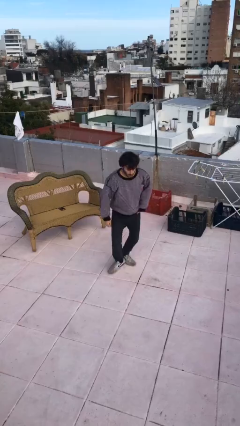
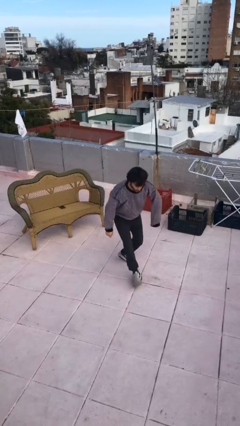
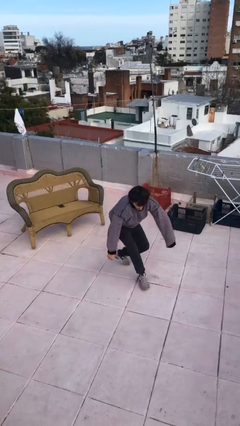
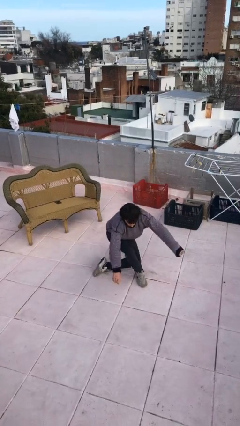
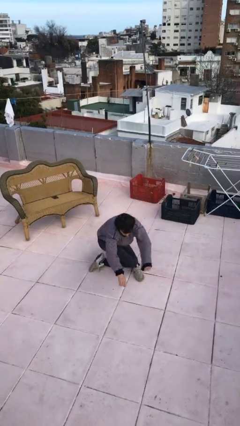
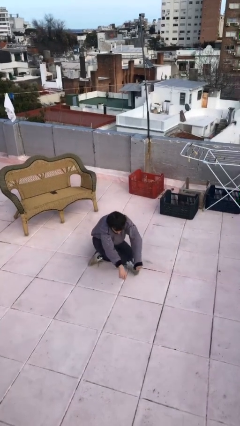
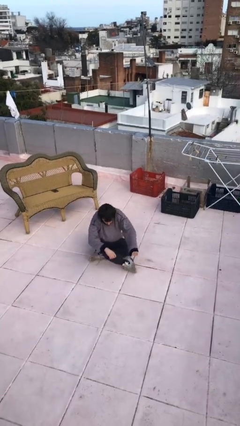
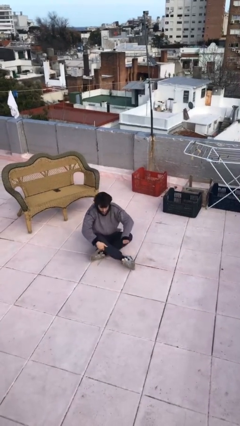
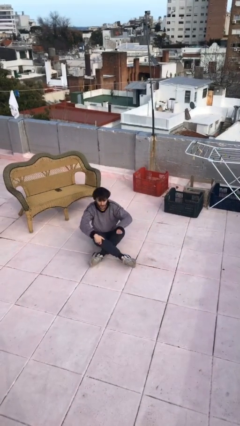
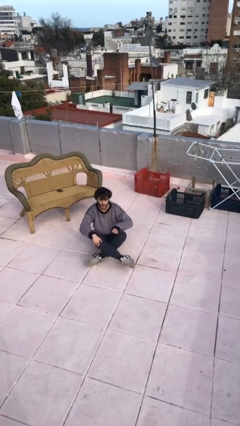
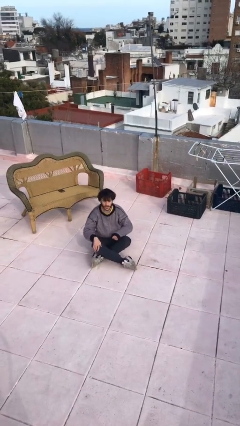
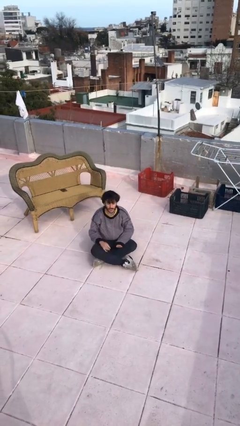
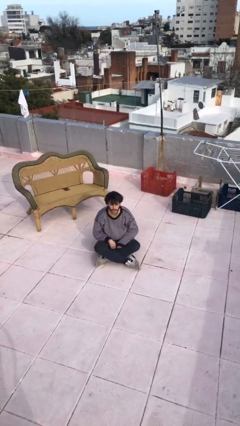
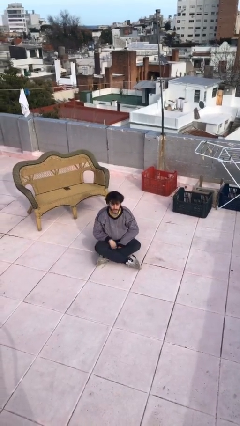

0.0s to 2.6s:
person sits crisscross

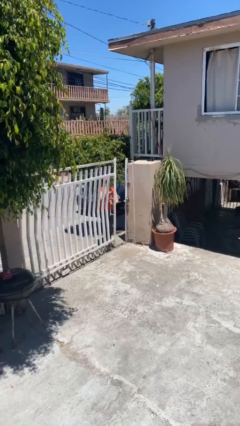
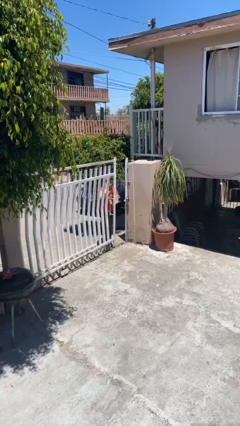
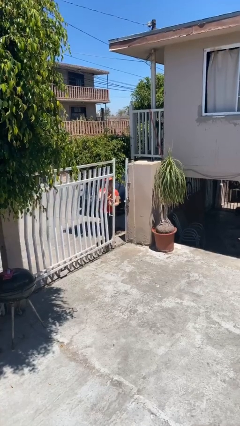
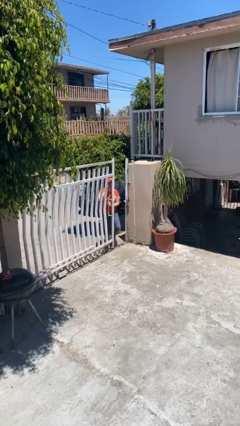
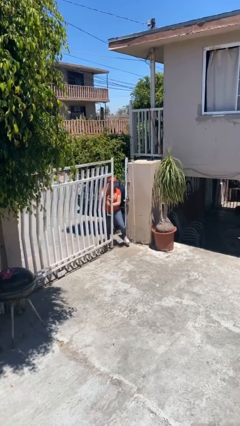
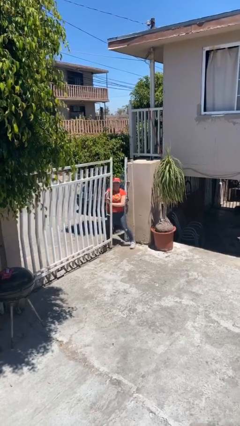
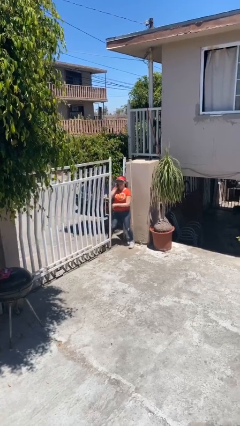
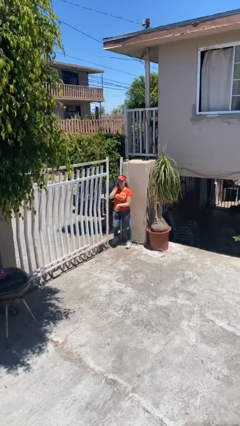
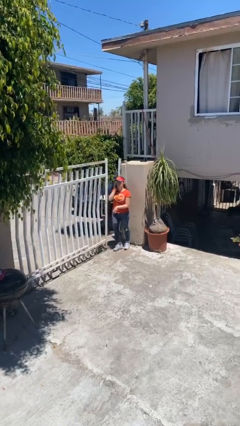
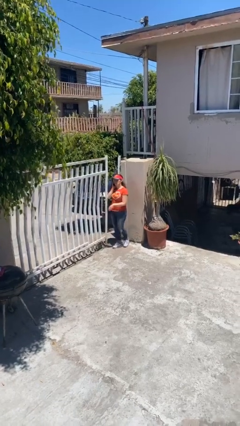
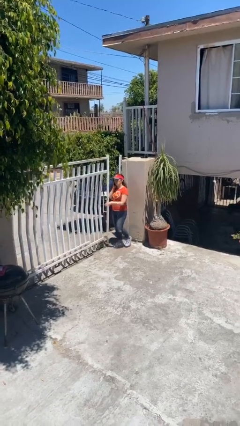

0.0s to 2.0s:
person enters scene through structure

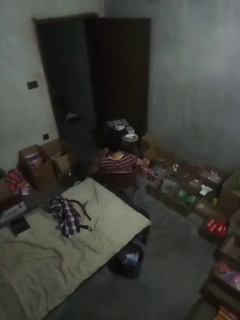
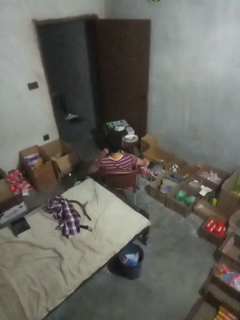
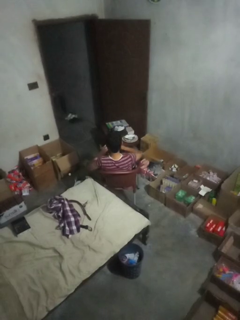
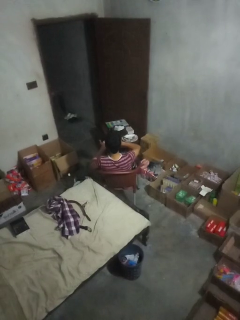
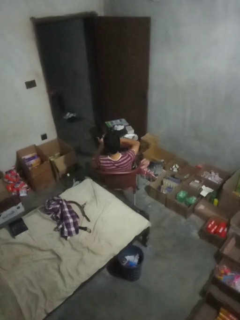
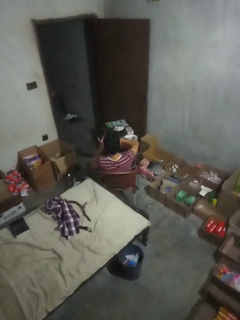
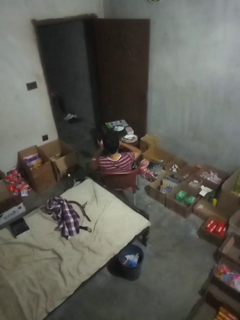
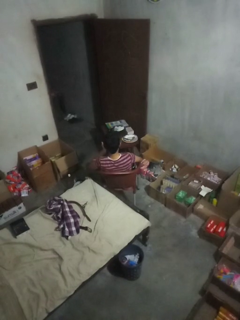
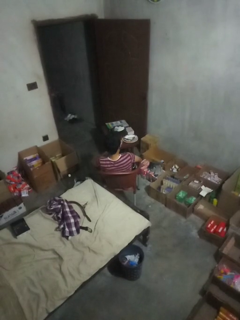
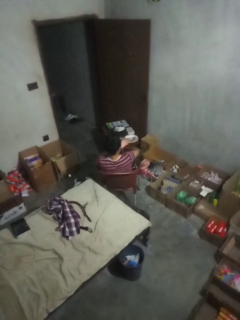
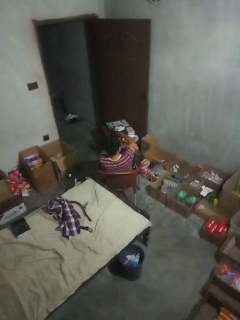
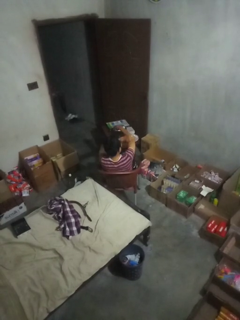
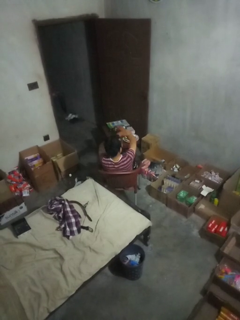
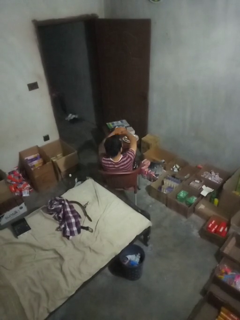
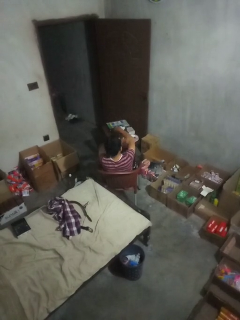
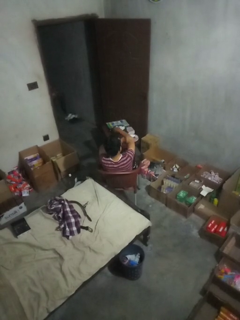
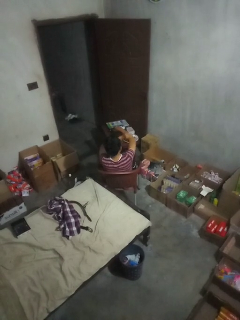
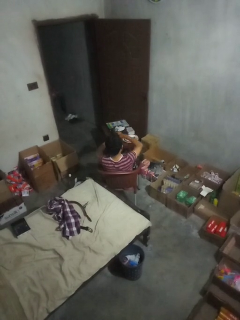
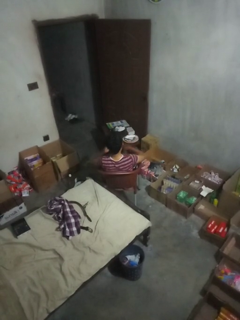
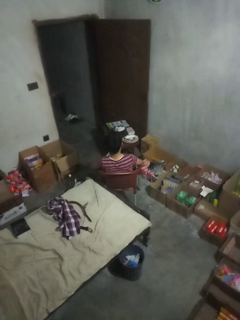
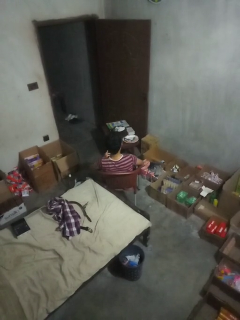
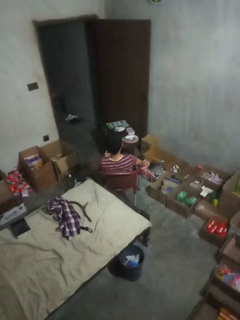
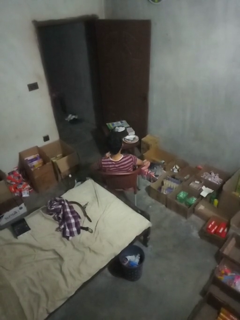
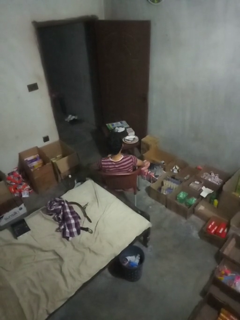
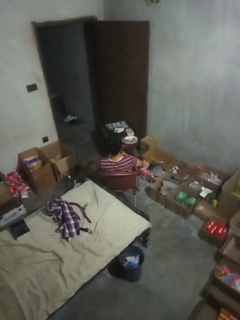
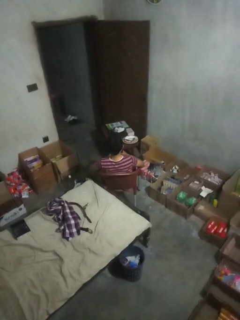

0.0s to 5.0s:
person applies sunscreen

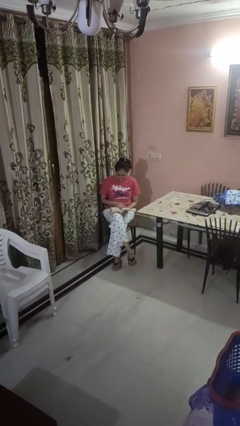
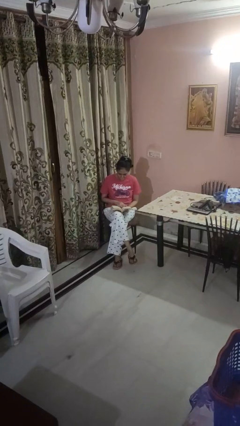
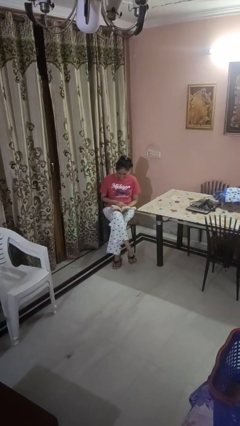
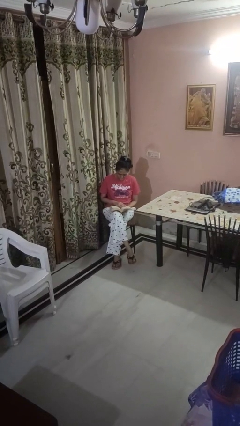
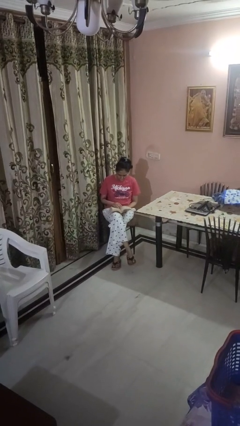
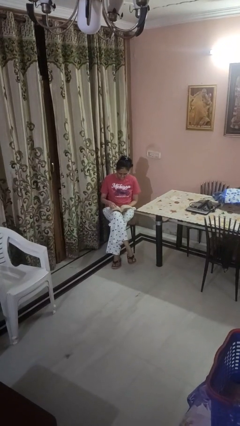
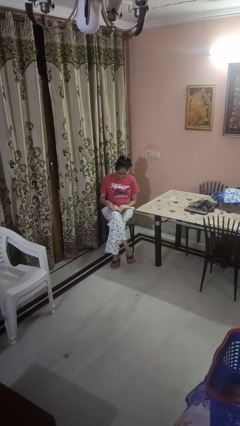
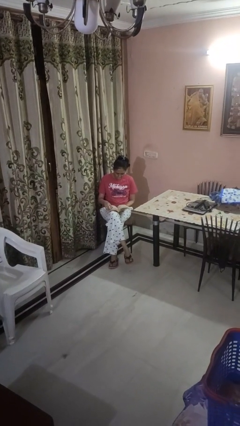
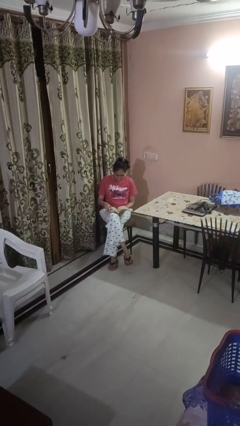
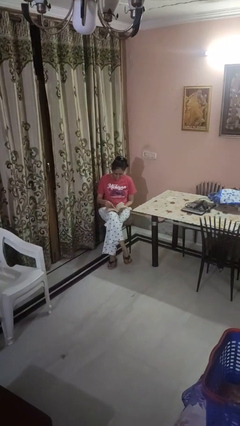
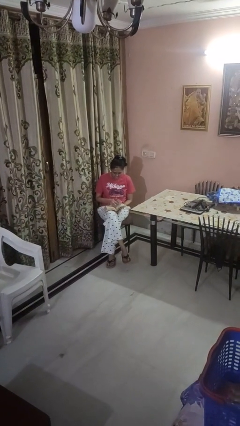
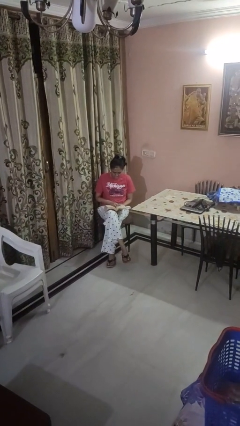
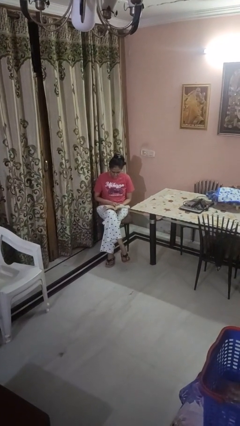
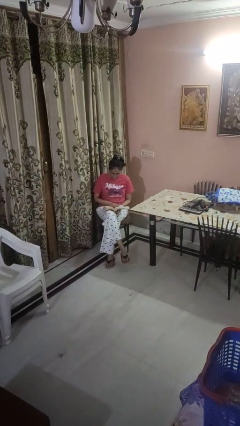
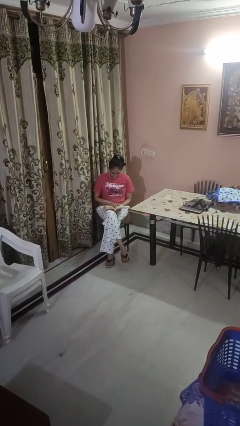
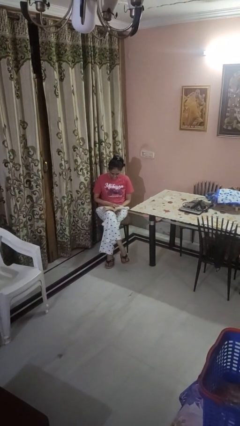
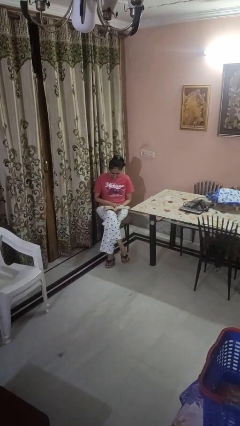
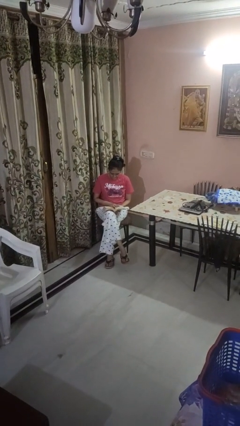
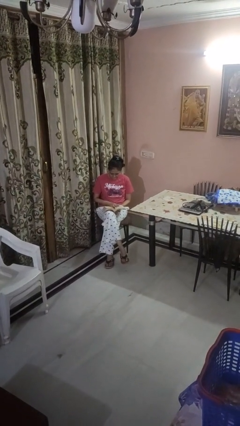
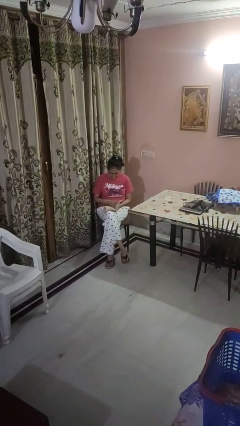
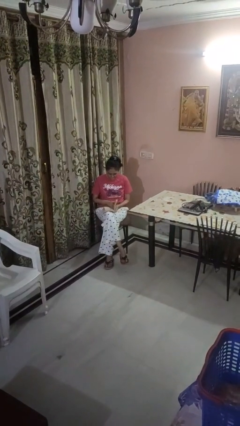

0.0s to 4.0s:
person reads book

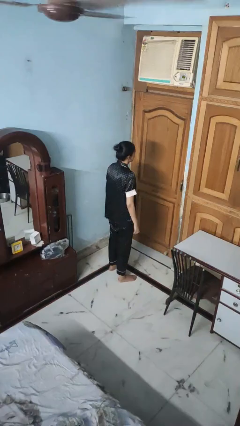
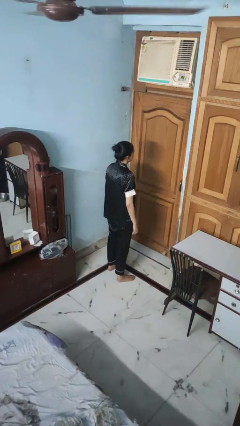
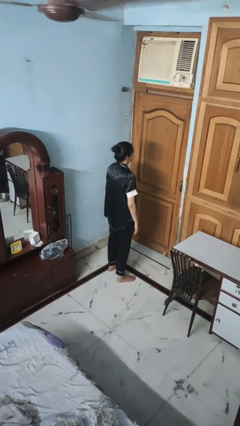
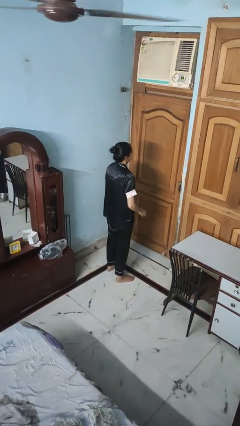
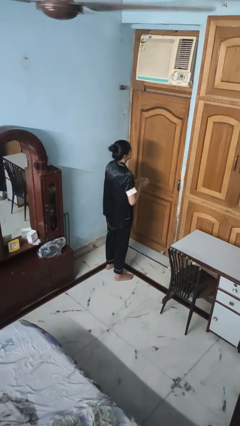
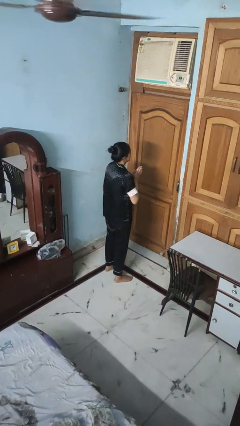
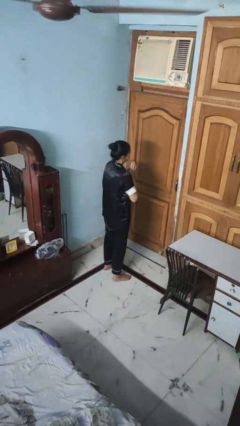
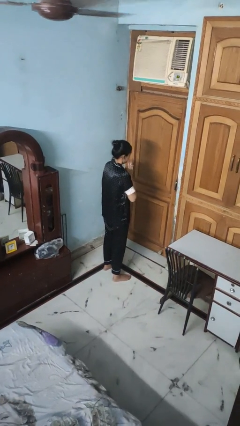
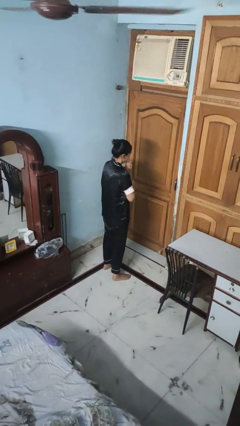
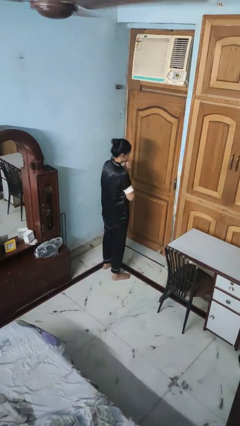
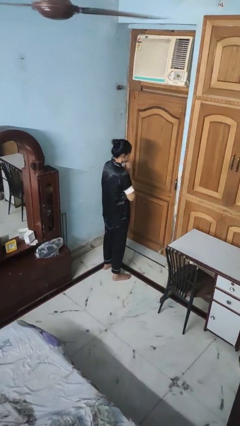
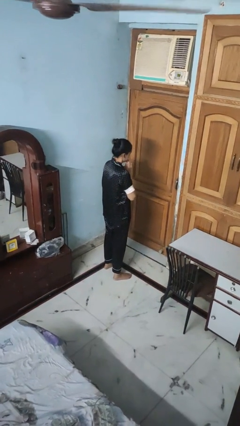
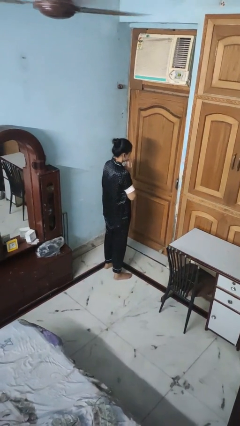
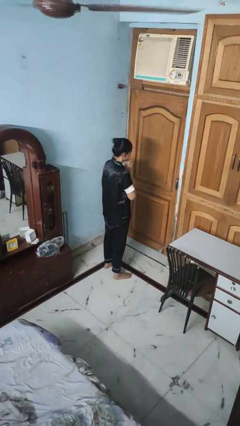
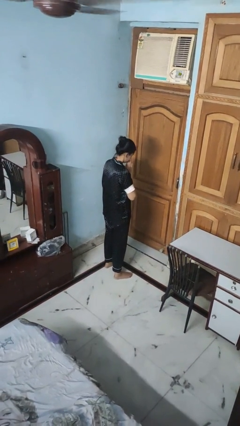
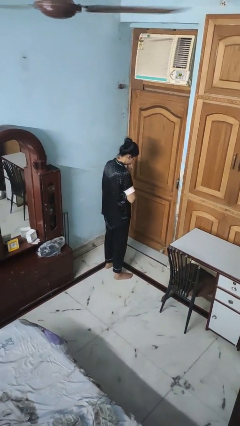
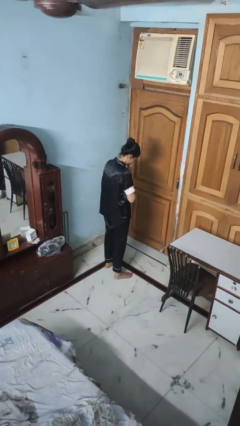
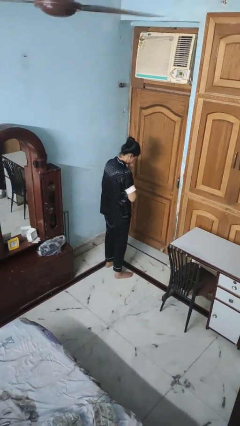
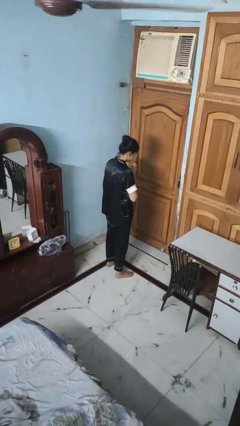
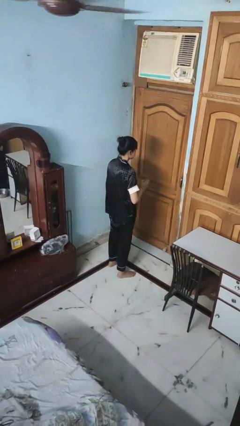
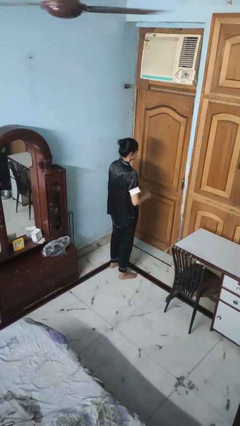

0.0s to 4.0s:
person prays

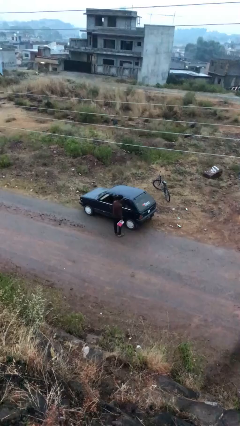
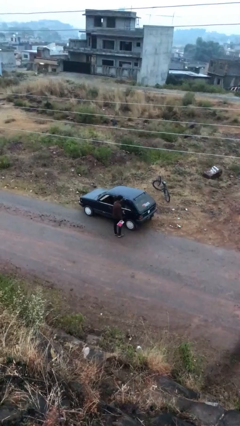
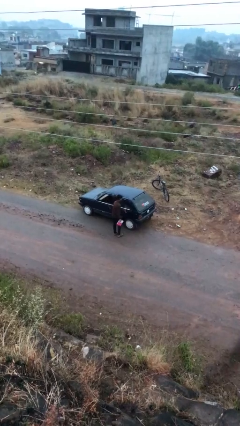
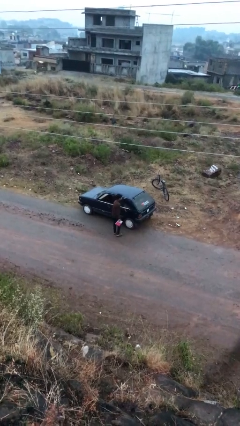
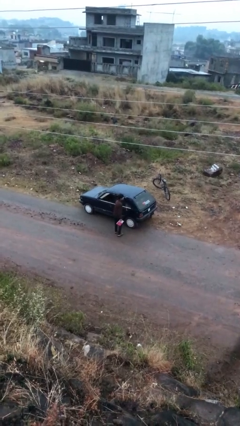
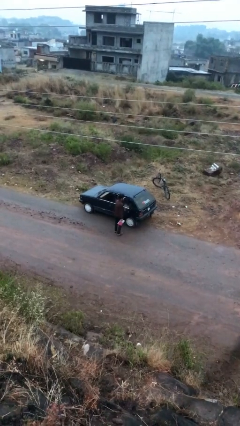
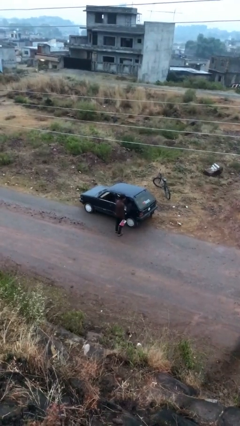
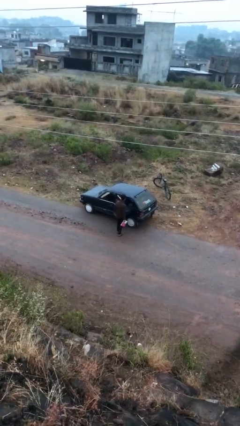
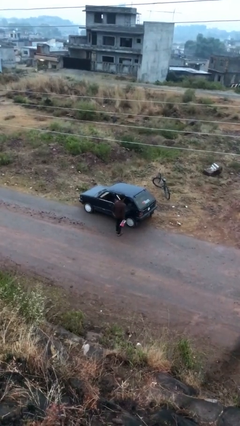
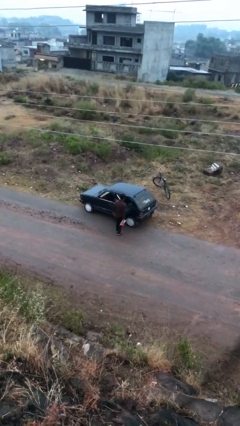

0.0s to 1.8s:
person opens car door
